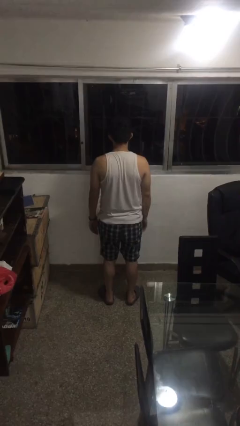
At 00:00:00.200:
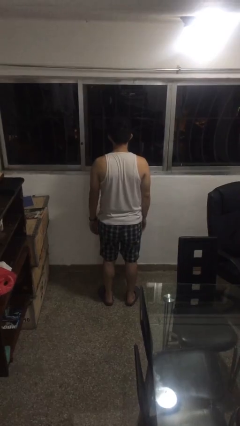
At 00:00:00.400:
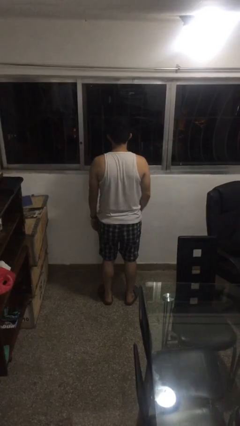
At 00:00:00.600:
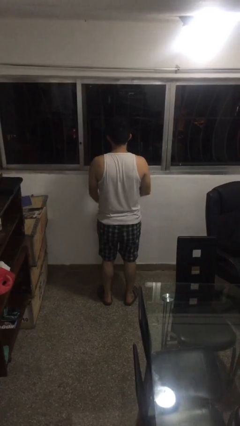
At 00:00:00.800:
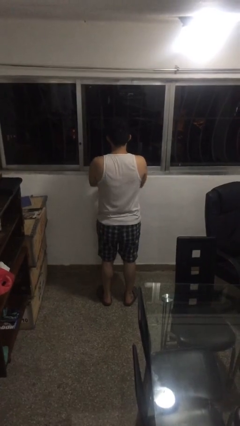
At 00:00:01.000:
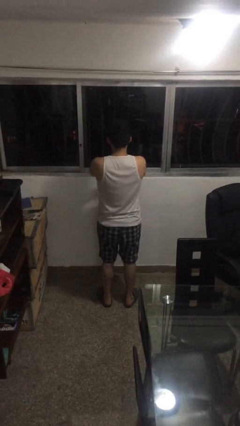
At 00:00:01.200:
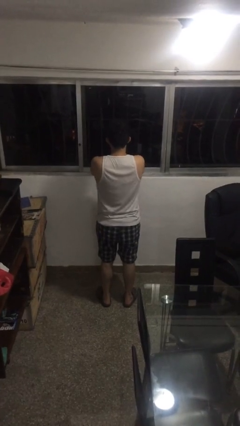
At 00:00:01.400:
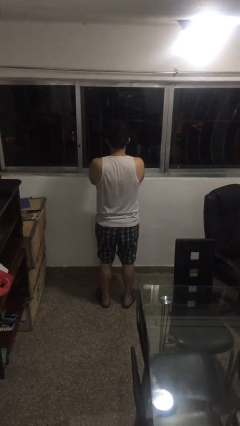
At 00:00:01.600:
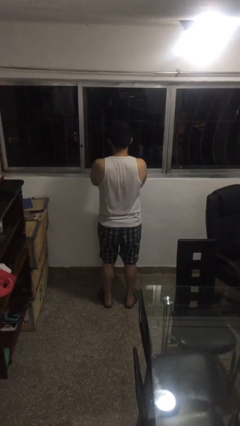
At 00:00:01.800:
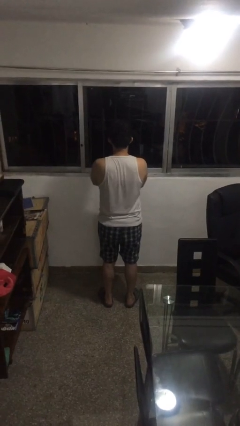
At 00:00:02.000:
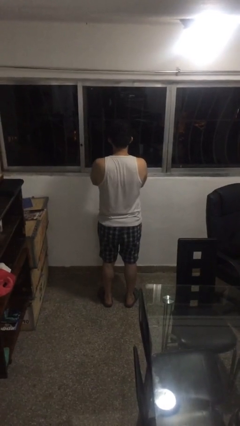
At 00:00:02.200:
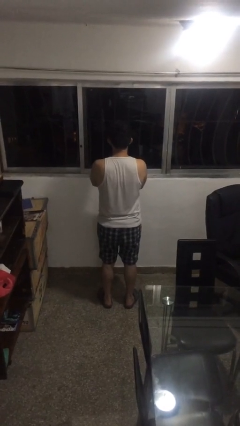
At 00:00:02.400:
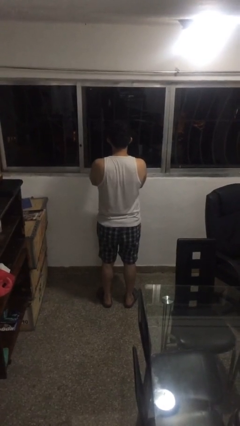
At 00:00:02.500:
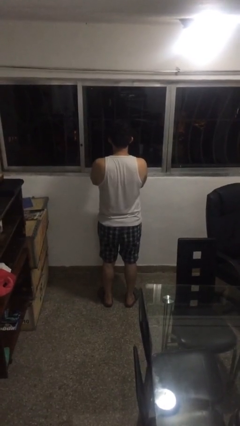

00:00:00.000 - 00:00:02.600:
person crosses arms

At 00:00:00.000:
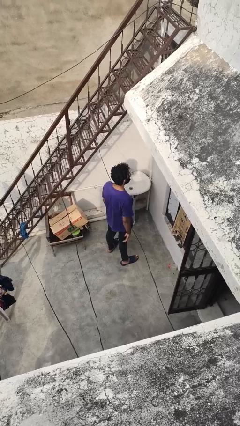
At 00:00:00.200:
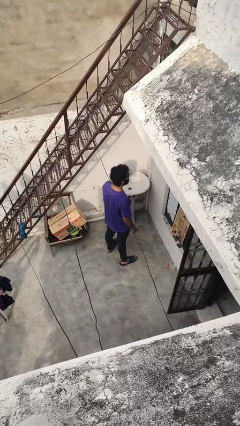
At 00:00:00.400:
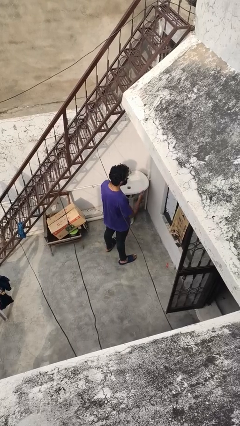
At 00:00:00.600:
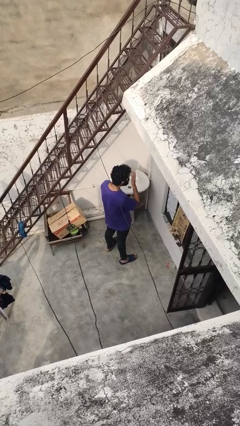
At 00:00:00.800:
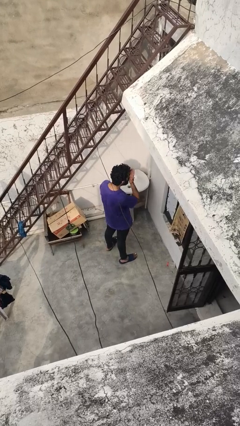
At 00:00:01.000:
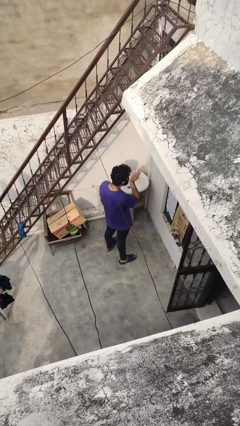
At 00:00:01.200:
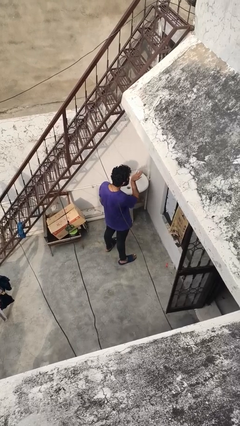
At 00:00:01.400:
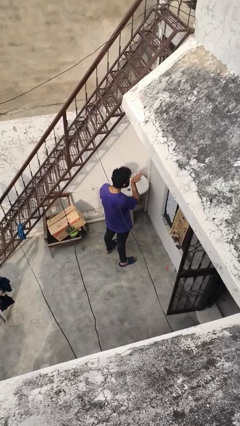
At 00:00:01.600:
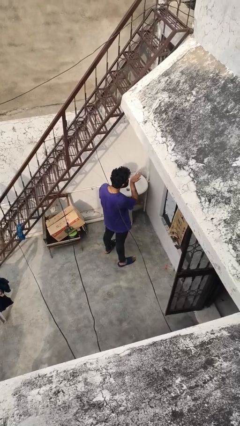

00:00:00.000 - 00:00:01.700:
person gestures blow kiss

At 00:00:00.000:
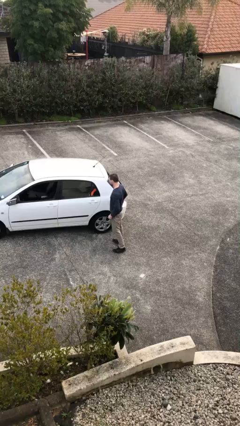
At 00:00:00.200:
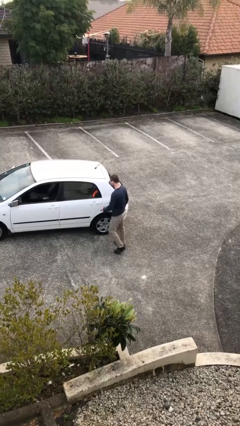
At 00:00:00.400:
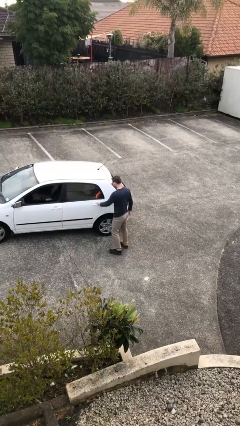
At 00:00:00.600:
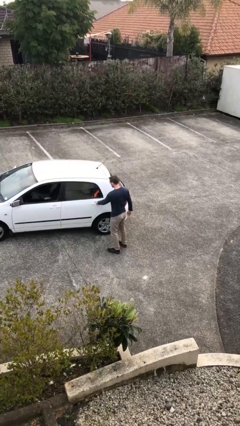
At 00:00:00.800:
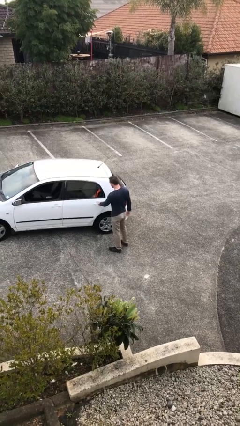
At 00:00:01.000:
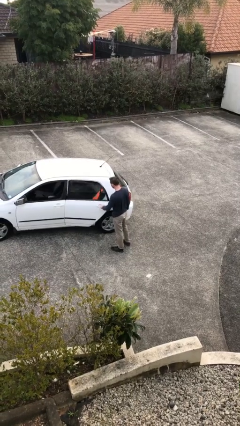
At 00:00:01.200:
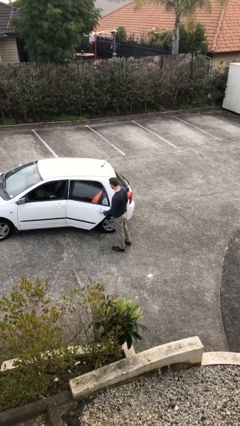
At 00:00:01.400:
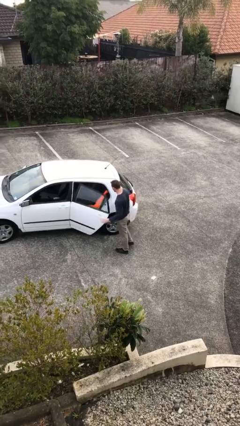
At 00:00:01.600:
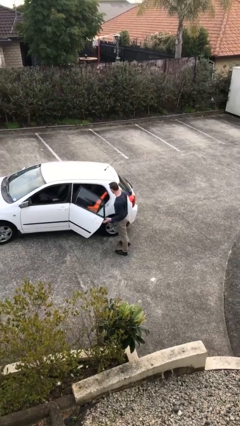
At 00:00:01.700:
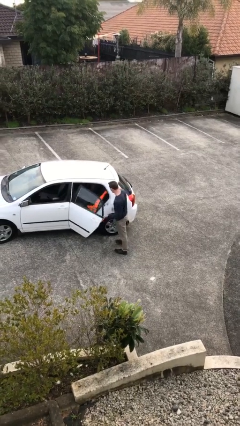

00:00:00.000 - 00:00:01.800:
person opens car door

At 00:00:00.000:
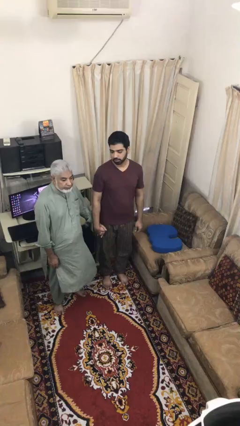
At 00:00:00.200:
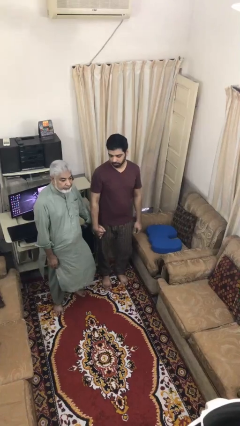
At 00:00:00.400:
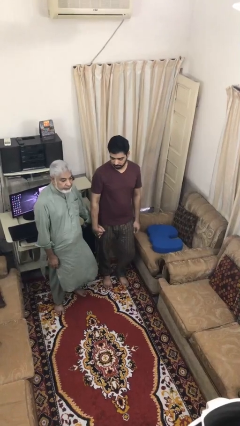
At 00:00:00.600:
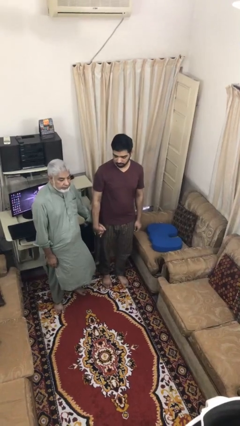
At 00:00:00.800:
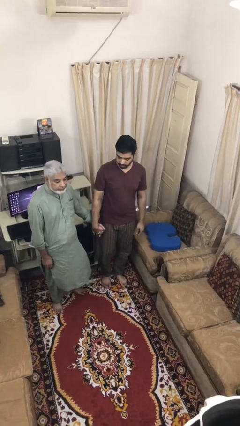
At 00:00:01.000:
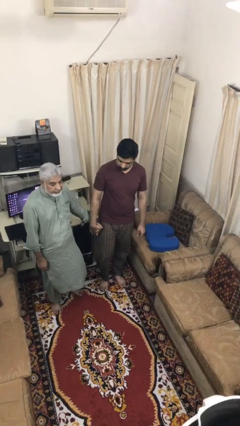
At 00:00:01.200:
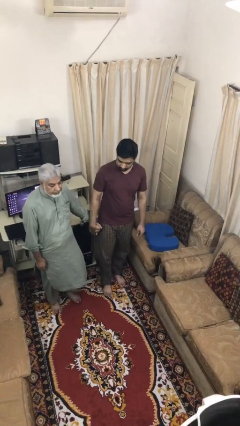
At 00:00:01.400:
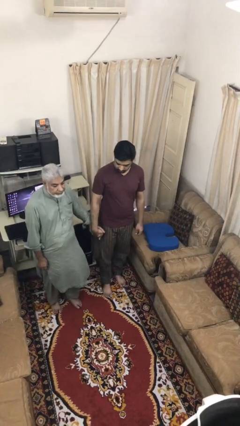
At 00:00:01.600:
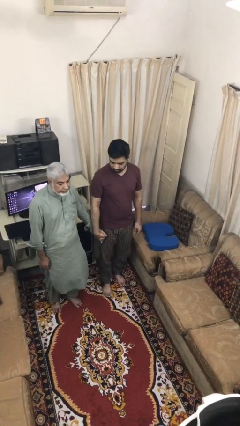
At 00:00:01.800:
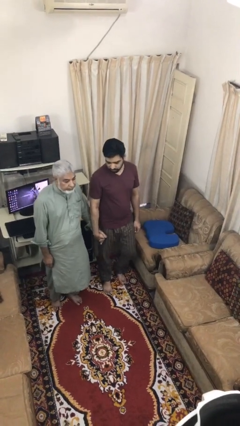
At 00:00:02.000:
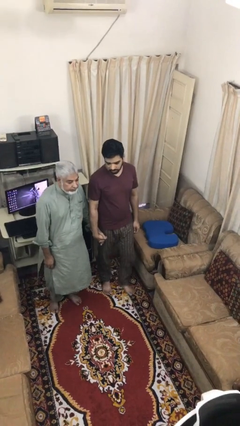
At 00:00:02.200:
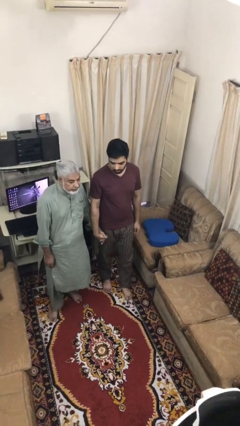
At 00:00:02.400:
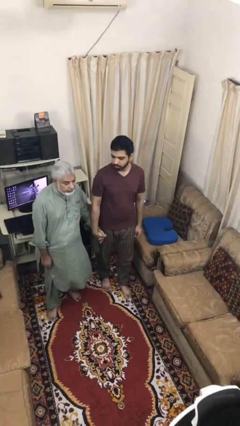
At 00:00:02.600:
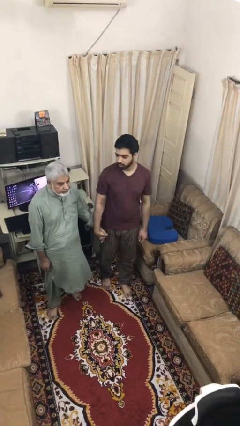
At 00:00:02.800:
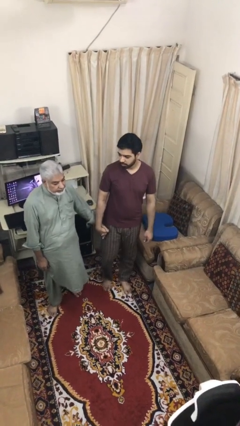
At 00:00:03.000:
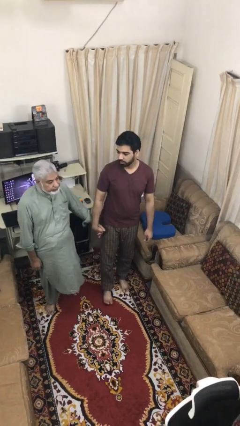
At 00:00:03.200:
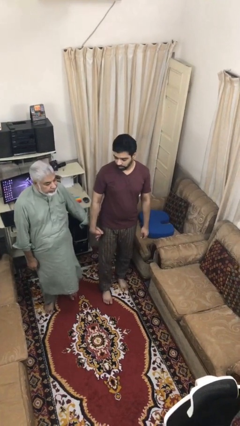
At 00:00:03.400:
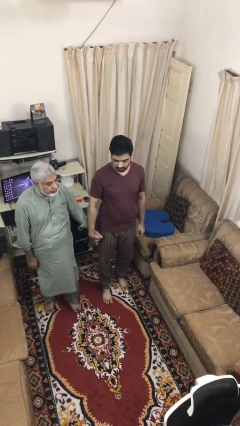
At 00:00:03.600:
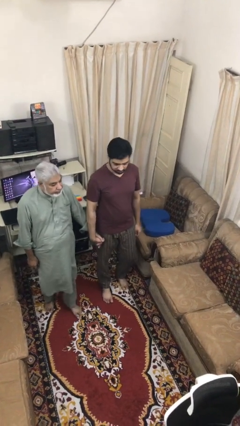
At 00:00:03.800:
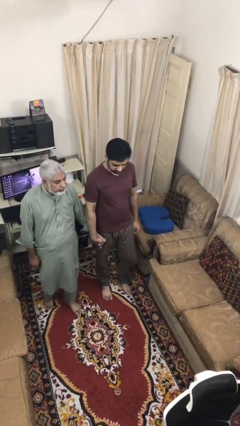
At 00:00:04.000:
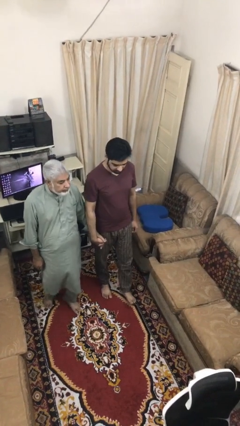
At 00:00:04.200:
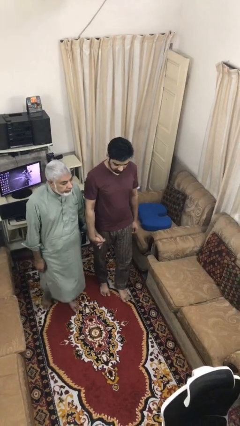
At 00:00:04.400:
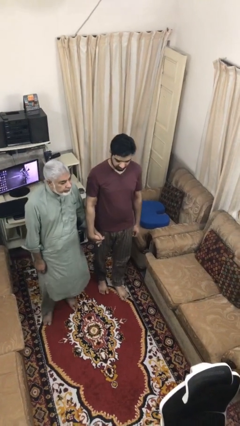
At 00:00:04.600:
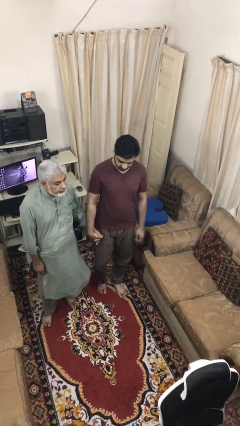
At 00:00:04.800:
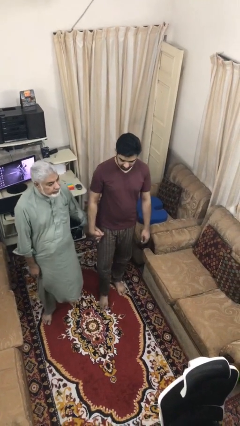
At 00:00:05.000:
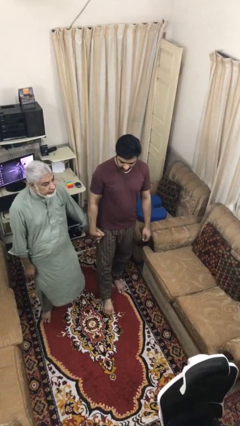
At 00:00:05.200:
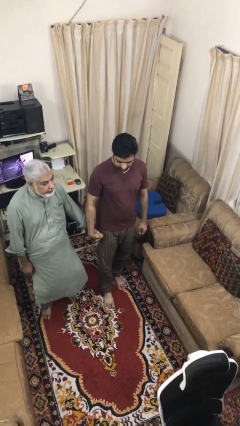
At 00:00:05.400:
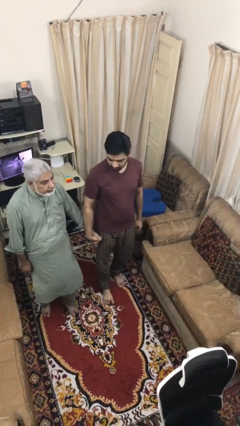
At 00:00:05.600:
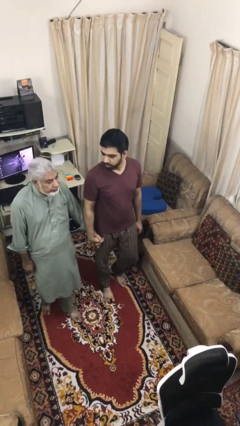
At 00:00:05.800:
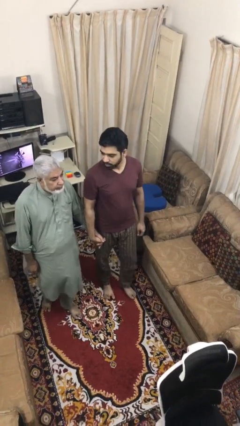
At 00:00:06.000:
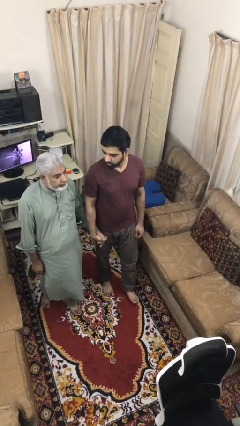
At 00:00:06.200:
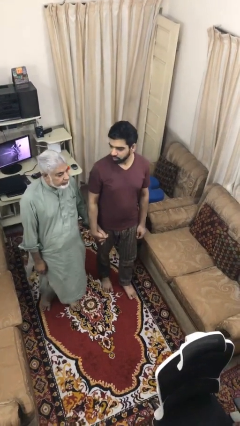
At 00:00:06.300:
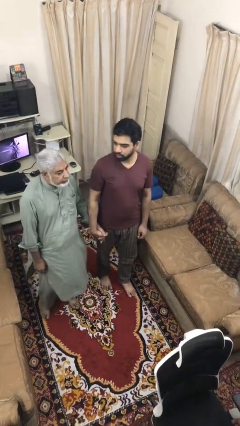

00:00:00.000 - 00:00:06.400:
person holds hand

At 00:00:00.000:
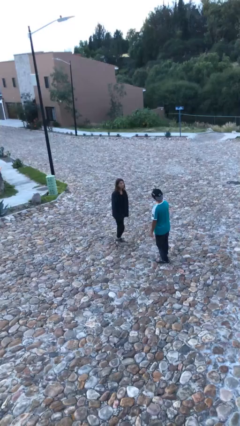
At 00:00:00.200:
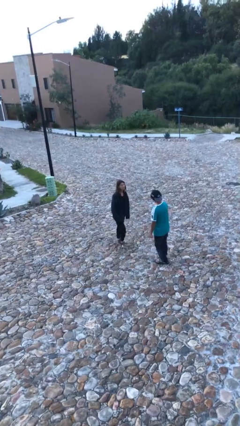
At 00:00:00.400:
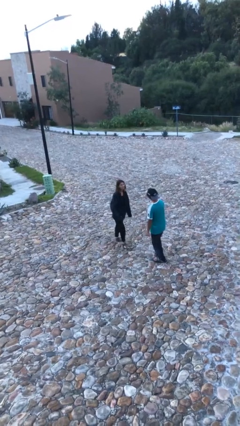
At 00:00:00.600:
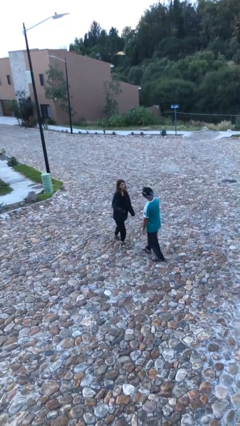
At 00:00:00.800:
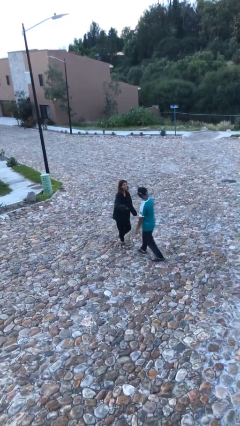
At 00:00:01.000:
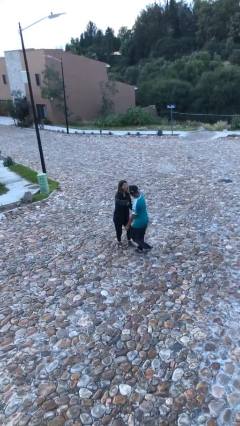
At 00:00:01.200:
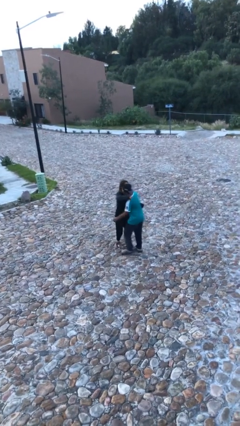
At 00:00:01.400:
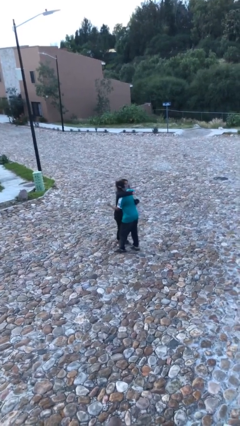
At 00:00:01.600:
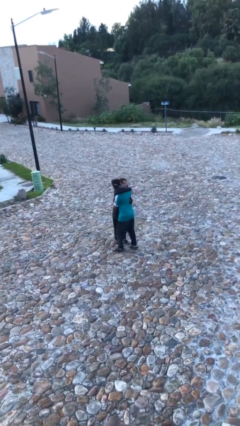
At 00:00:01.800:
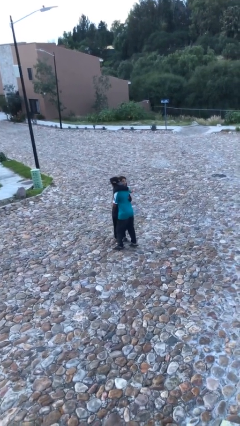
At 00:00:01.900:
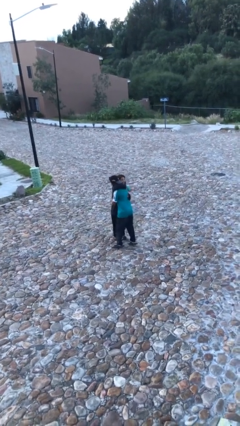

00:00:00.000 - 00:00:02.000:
person embraces person

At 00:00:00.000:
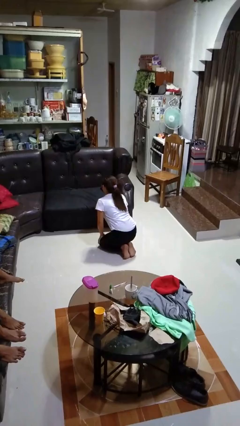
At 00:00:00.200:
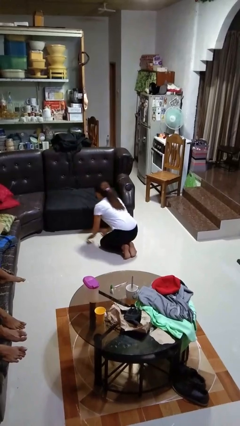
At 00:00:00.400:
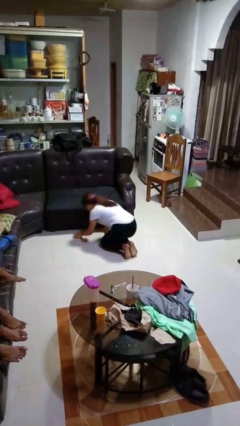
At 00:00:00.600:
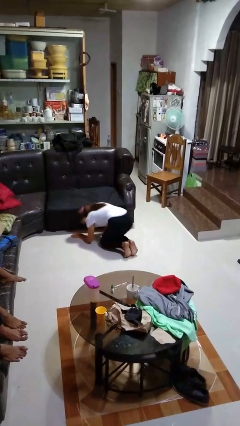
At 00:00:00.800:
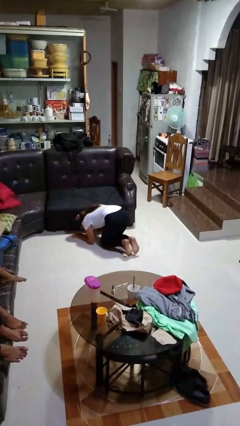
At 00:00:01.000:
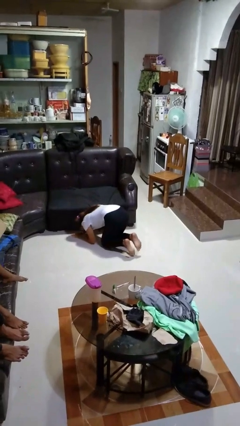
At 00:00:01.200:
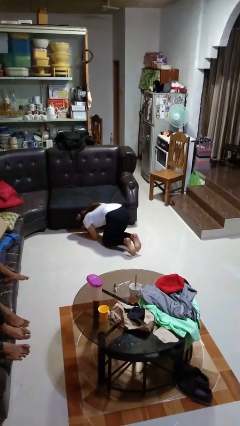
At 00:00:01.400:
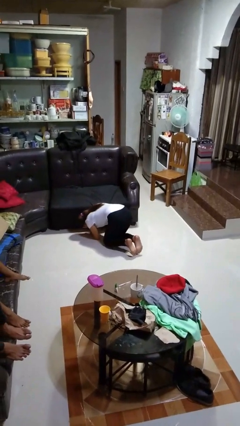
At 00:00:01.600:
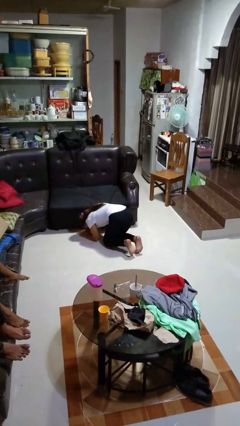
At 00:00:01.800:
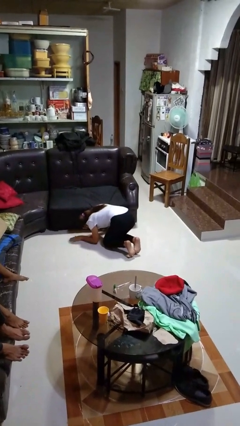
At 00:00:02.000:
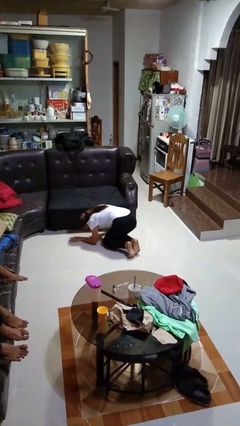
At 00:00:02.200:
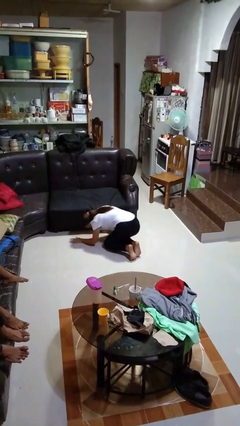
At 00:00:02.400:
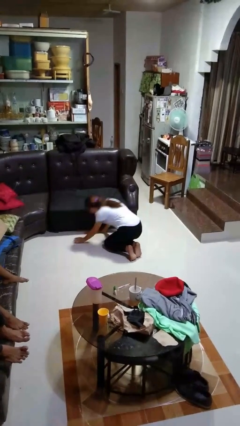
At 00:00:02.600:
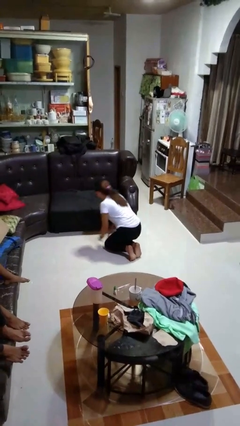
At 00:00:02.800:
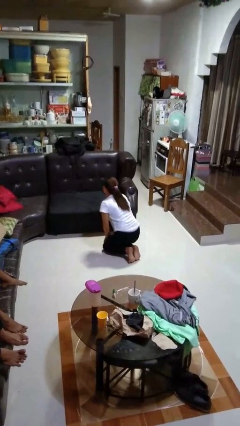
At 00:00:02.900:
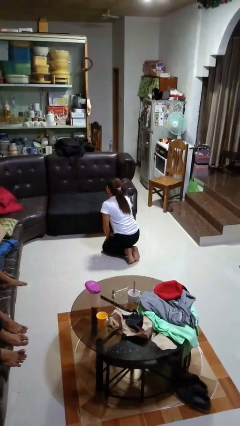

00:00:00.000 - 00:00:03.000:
person searches under couch
